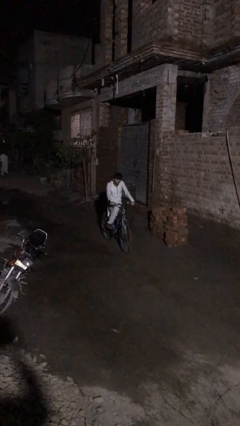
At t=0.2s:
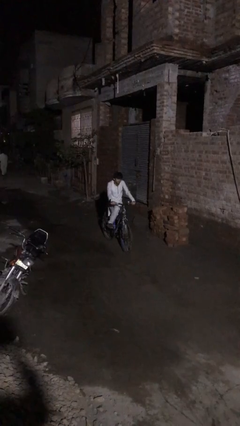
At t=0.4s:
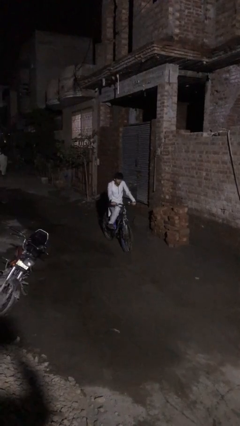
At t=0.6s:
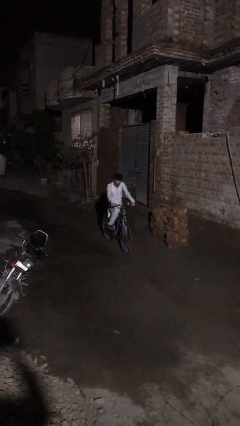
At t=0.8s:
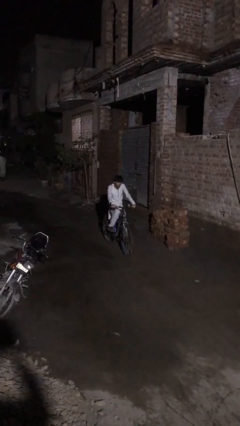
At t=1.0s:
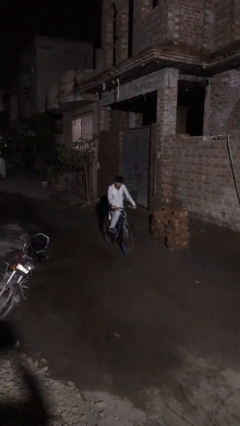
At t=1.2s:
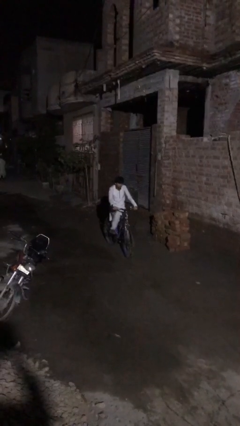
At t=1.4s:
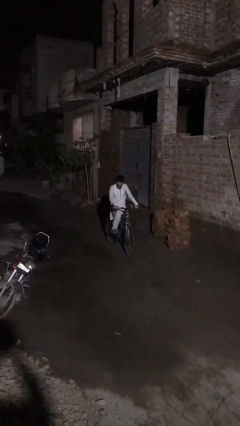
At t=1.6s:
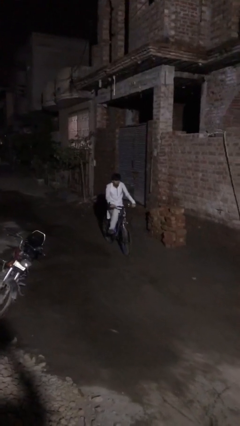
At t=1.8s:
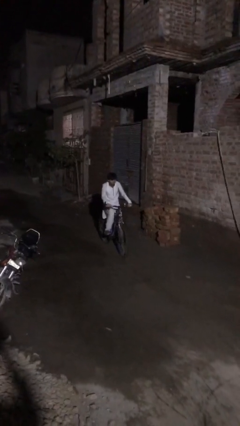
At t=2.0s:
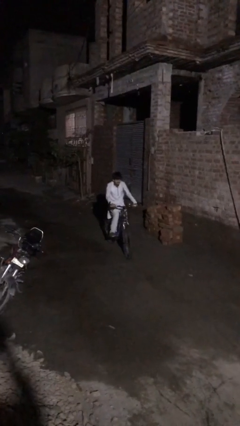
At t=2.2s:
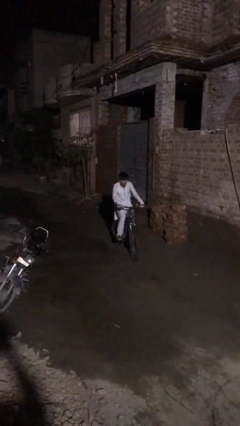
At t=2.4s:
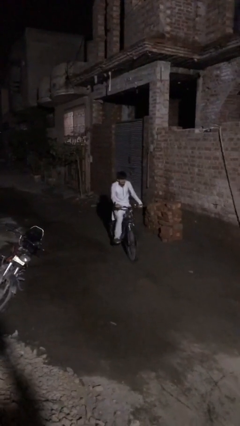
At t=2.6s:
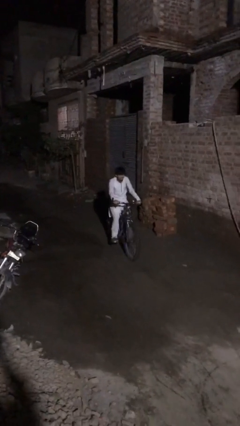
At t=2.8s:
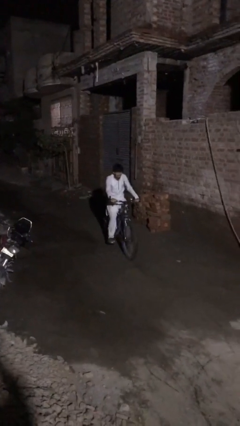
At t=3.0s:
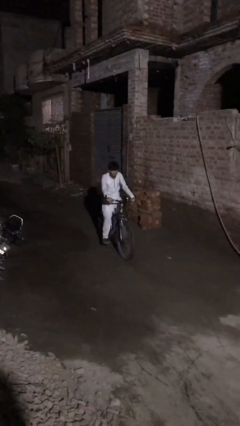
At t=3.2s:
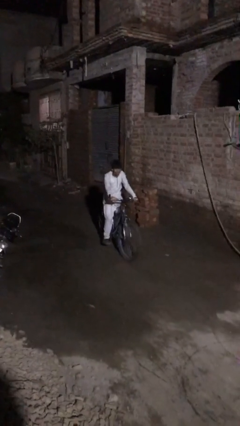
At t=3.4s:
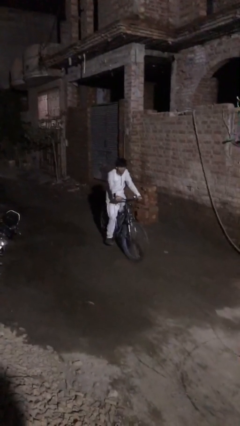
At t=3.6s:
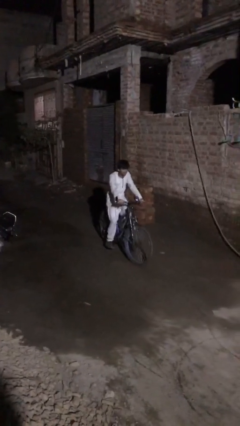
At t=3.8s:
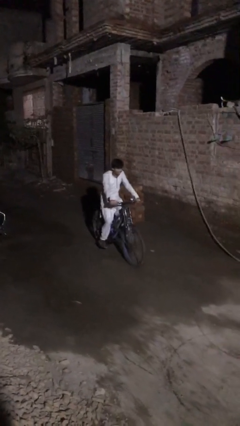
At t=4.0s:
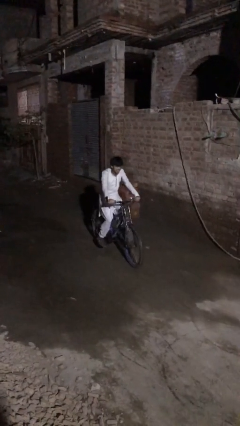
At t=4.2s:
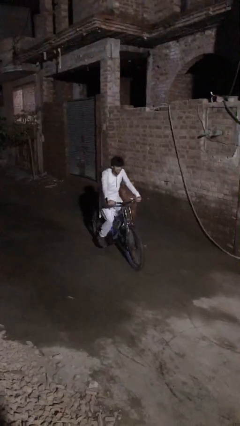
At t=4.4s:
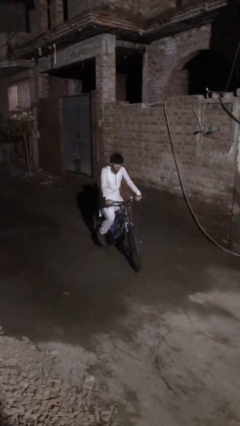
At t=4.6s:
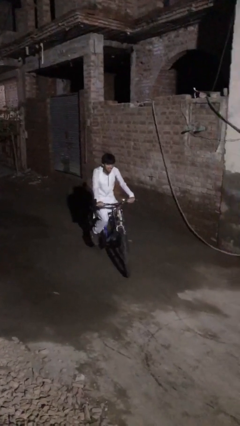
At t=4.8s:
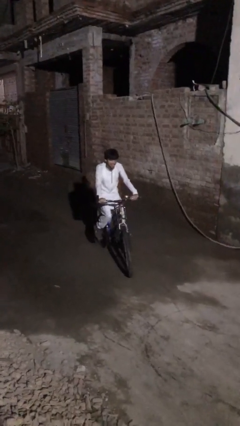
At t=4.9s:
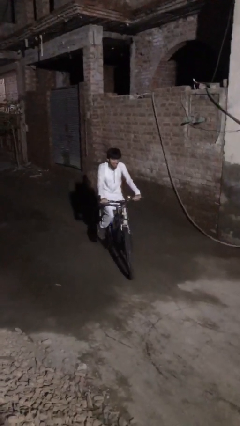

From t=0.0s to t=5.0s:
person rides bicycle

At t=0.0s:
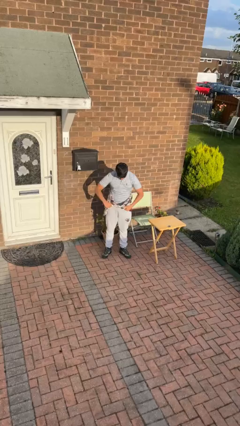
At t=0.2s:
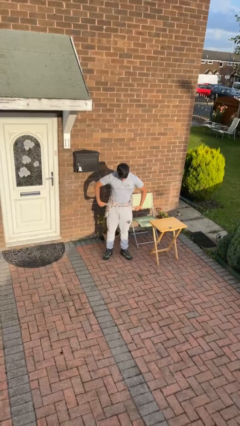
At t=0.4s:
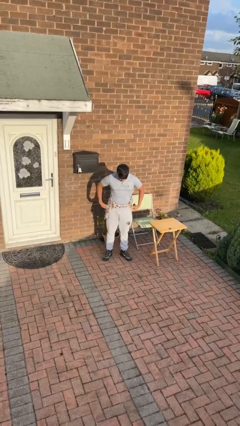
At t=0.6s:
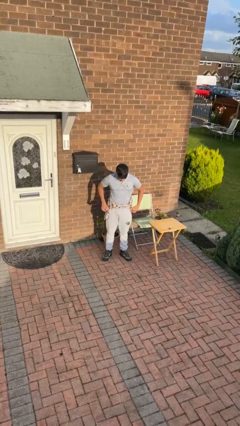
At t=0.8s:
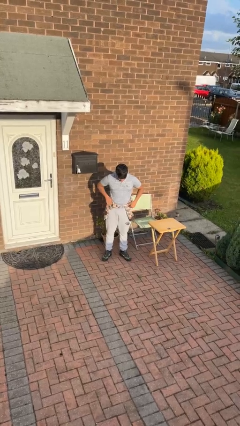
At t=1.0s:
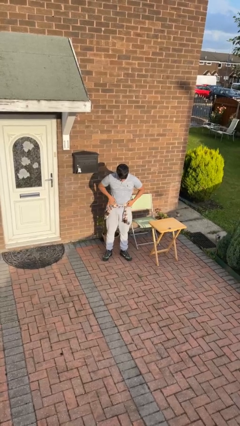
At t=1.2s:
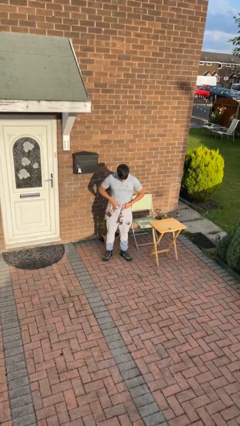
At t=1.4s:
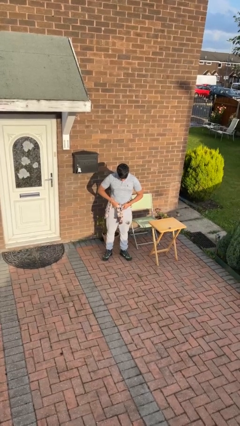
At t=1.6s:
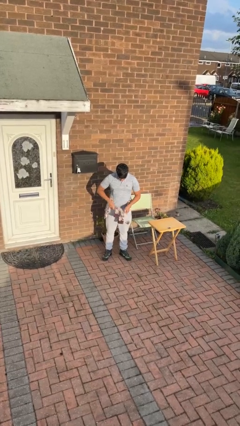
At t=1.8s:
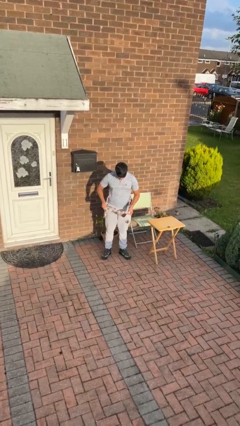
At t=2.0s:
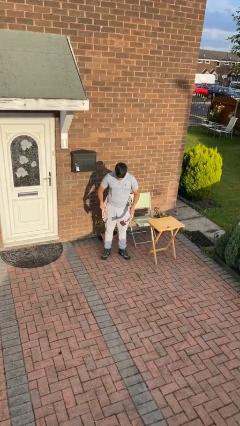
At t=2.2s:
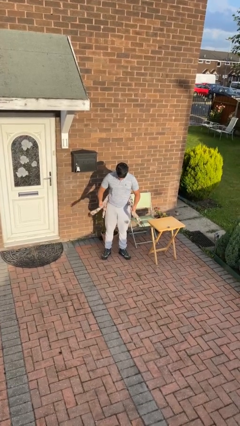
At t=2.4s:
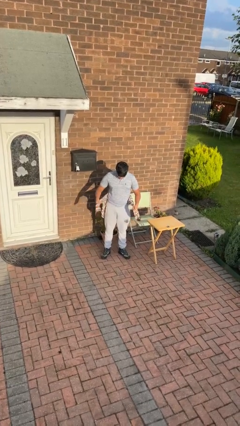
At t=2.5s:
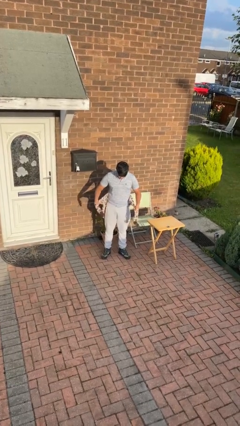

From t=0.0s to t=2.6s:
person unties jacket around waist

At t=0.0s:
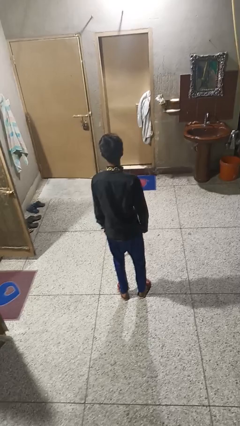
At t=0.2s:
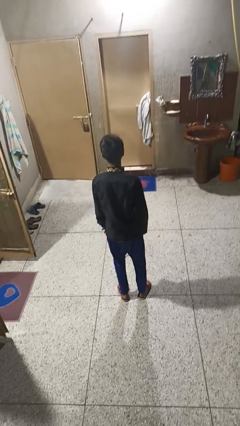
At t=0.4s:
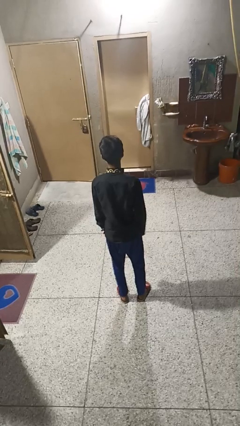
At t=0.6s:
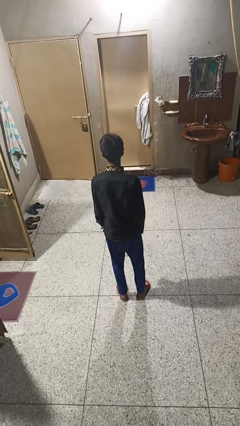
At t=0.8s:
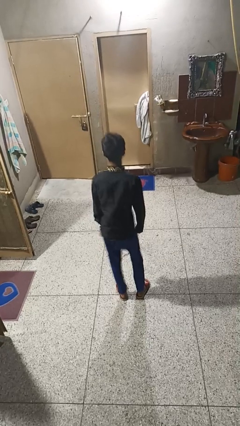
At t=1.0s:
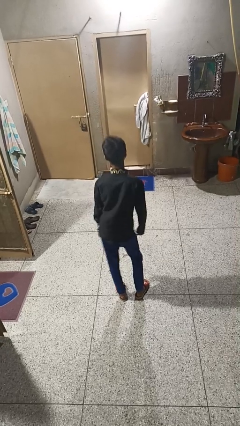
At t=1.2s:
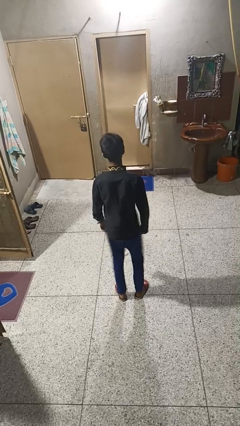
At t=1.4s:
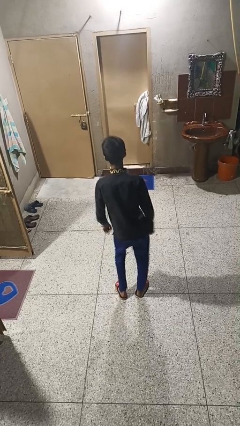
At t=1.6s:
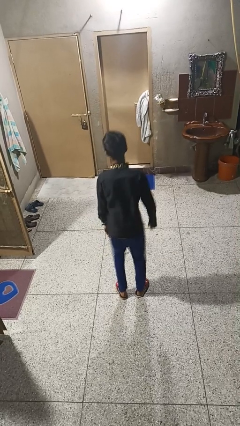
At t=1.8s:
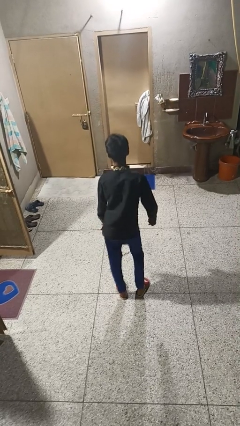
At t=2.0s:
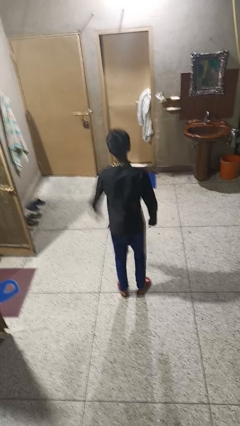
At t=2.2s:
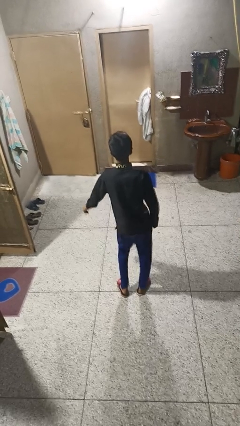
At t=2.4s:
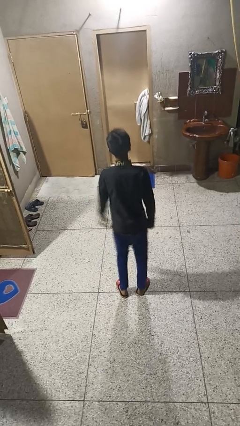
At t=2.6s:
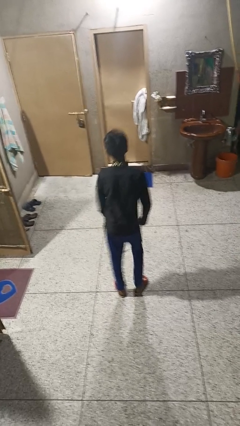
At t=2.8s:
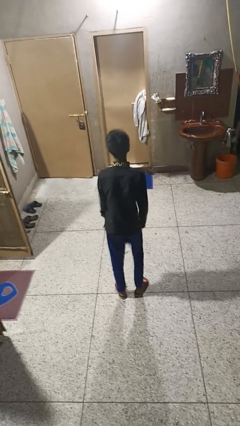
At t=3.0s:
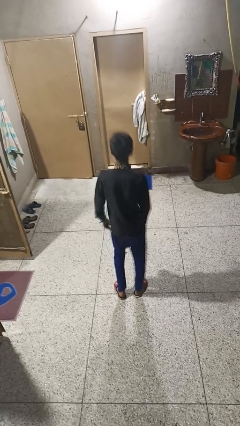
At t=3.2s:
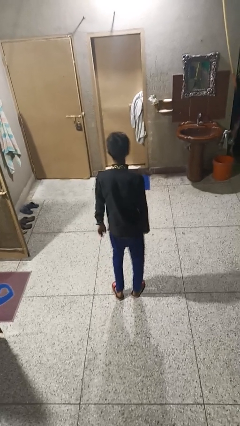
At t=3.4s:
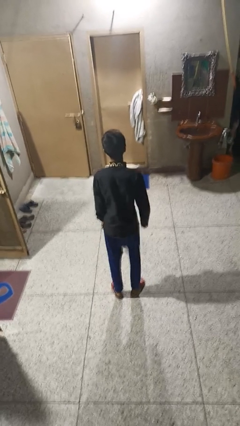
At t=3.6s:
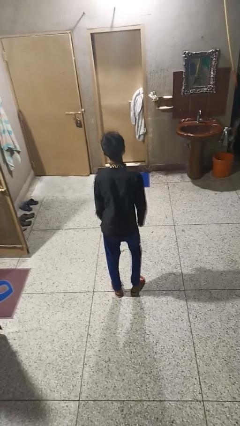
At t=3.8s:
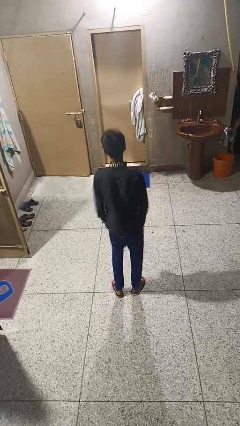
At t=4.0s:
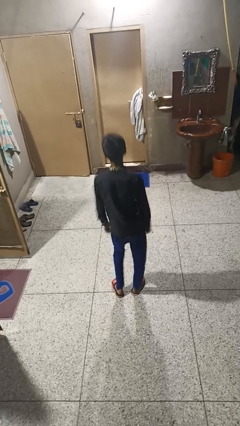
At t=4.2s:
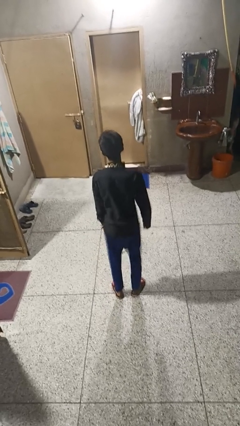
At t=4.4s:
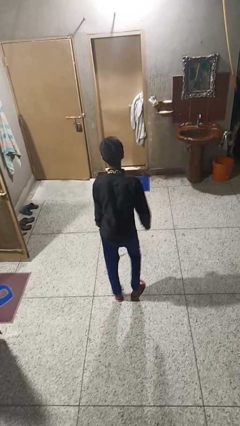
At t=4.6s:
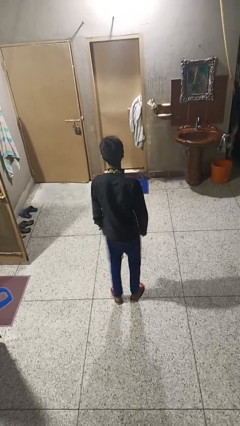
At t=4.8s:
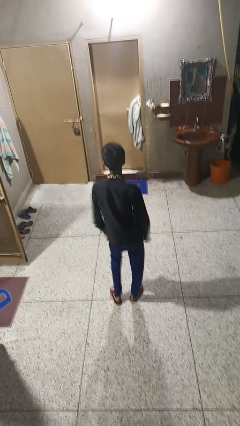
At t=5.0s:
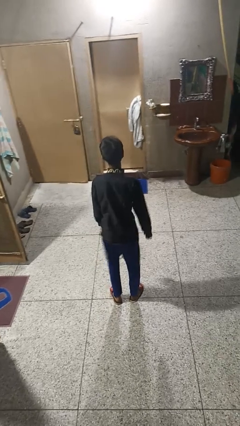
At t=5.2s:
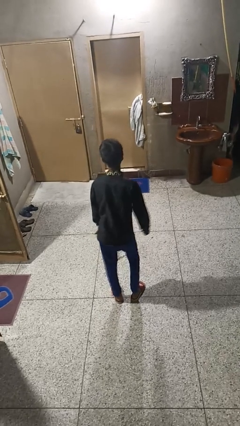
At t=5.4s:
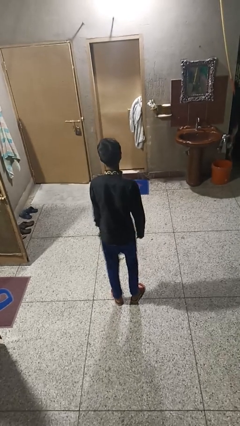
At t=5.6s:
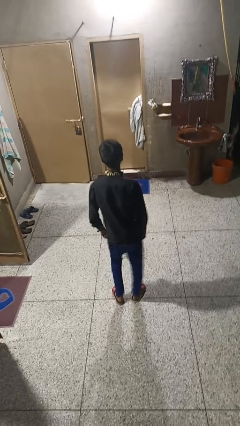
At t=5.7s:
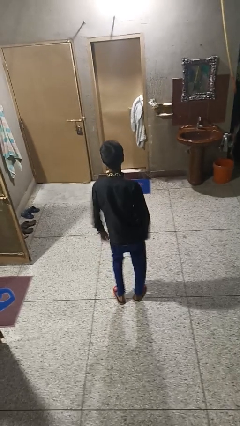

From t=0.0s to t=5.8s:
person wiggles hips

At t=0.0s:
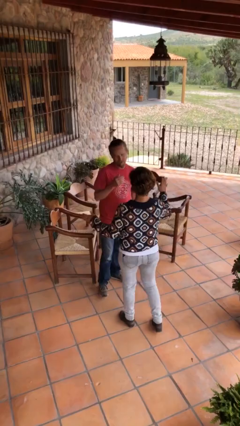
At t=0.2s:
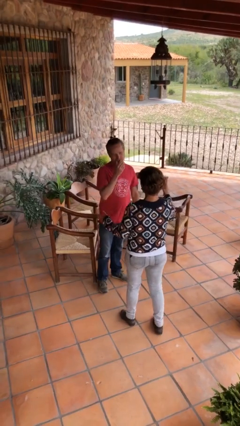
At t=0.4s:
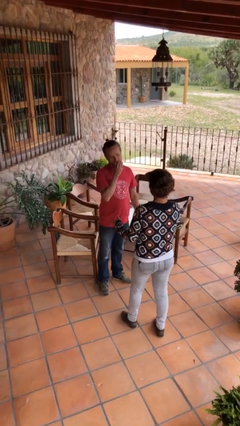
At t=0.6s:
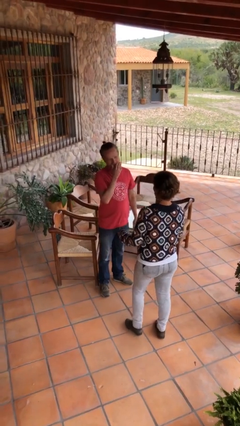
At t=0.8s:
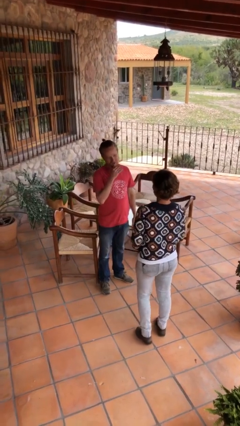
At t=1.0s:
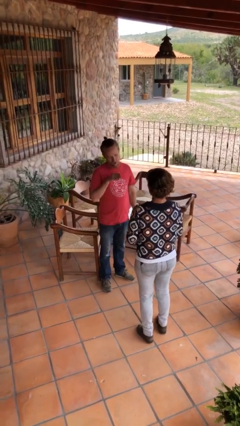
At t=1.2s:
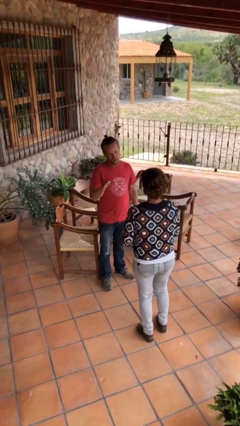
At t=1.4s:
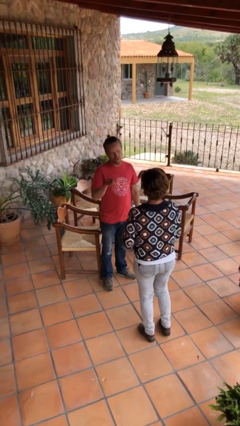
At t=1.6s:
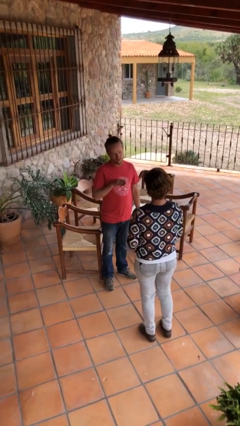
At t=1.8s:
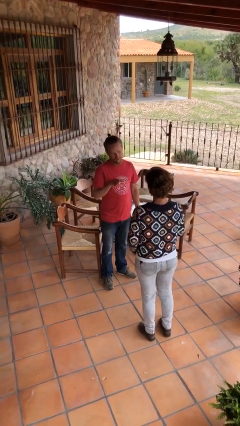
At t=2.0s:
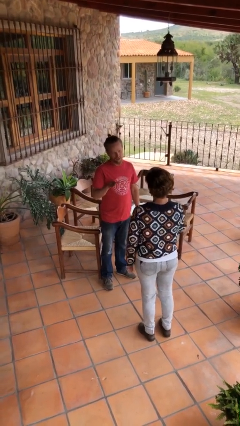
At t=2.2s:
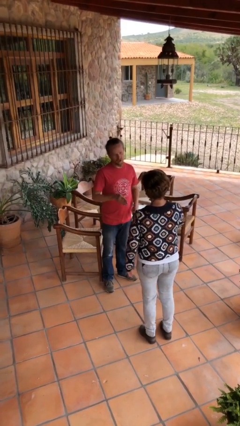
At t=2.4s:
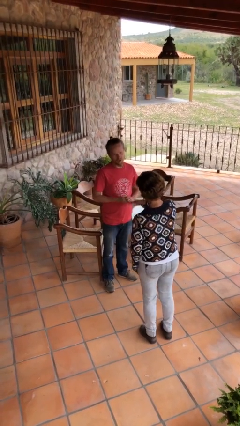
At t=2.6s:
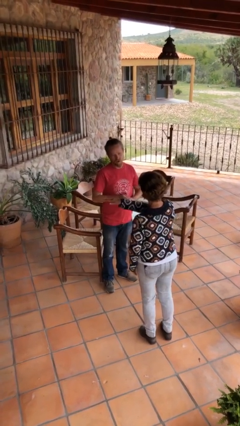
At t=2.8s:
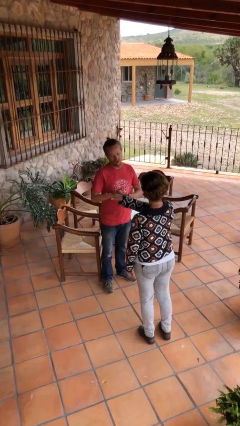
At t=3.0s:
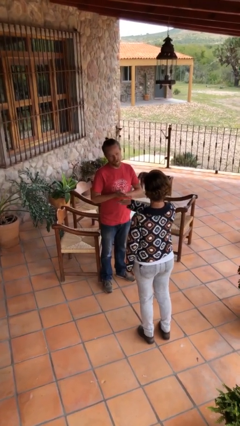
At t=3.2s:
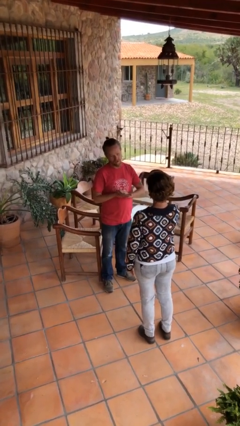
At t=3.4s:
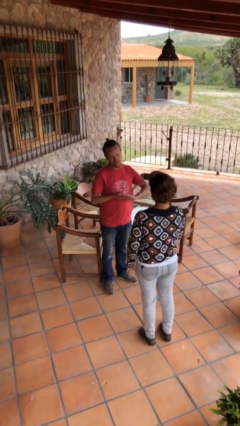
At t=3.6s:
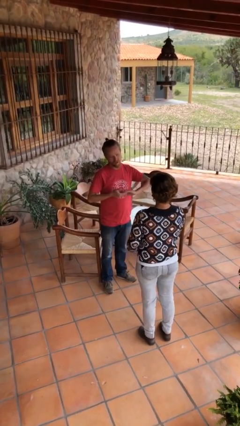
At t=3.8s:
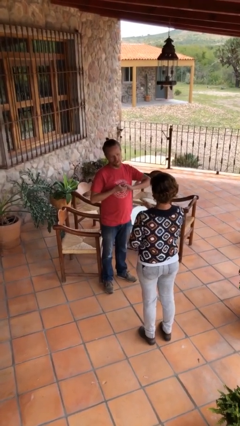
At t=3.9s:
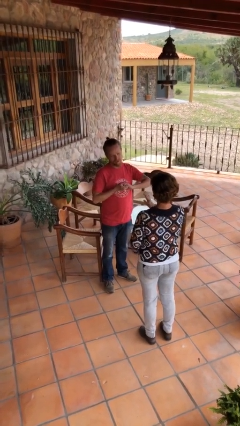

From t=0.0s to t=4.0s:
person talks to person

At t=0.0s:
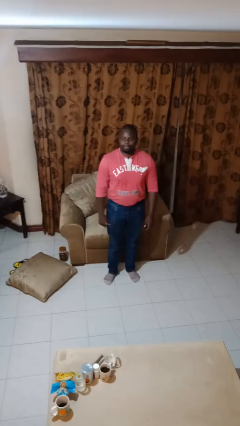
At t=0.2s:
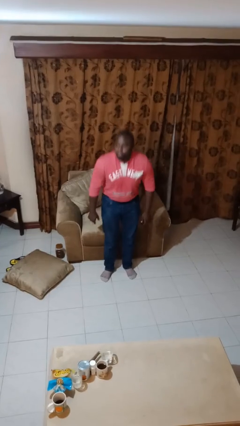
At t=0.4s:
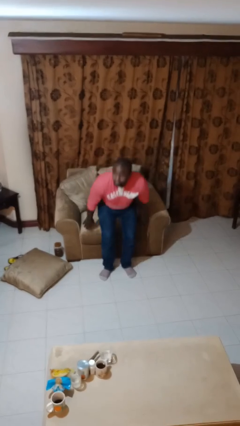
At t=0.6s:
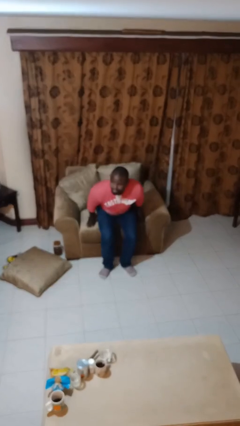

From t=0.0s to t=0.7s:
person sits down
